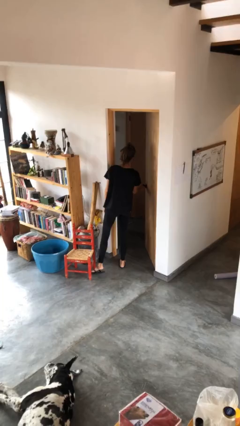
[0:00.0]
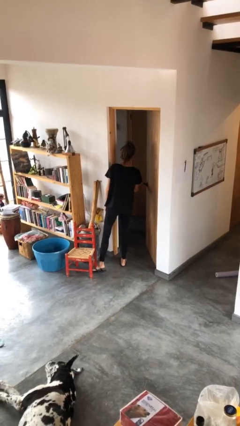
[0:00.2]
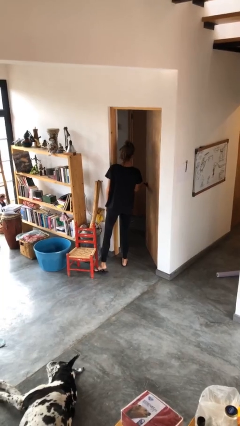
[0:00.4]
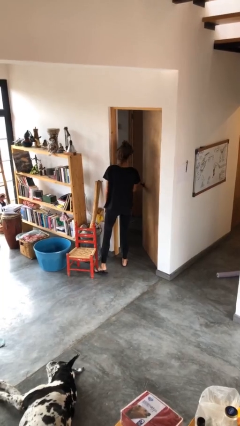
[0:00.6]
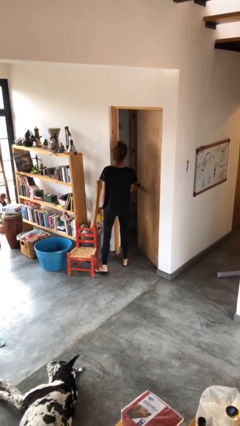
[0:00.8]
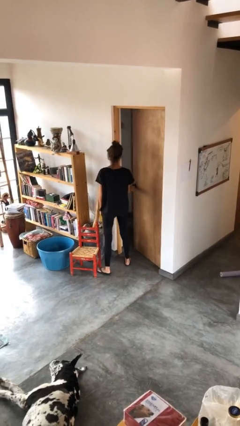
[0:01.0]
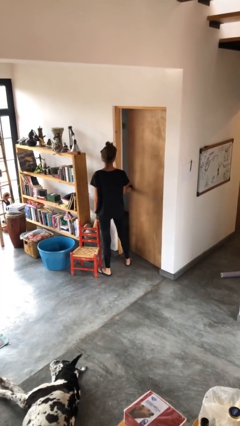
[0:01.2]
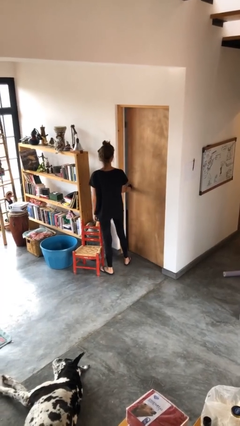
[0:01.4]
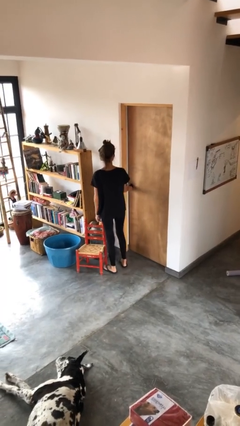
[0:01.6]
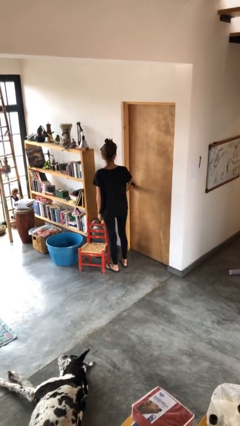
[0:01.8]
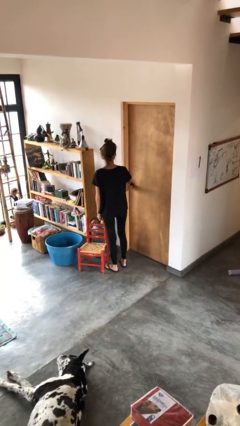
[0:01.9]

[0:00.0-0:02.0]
person closes facility door

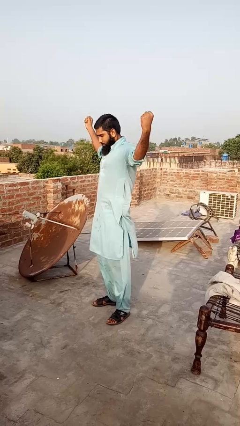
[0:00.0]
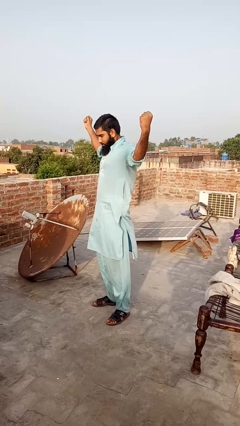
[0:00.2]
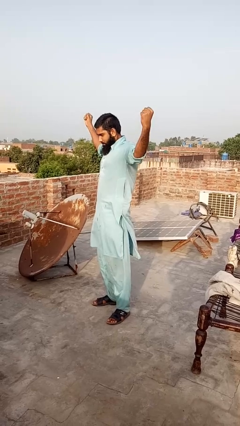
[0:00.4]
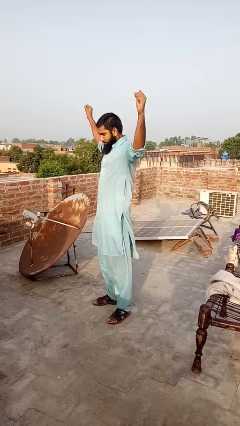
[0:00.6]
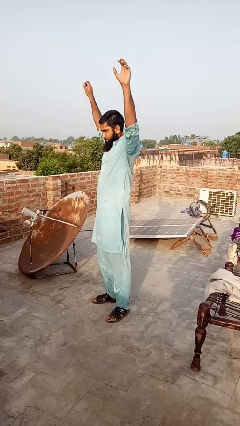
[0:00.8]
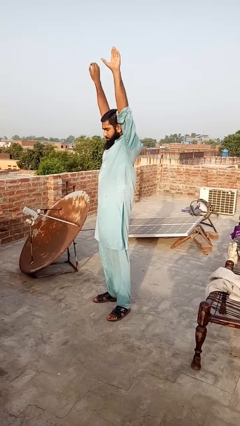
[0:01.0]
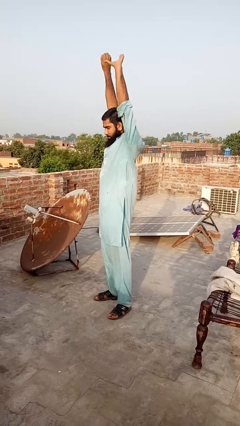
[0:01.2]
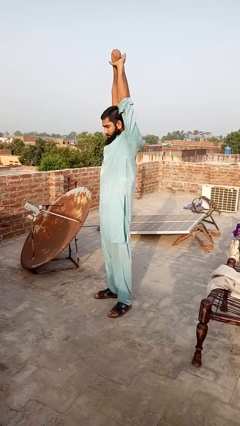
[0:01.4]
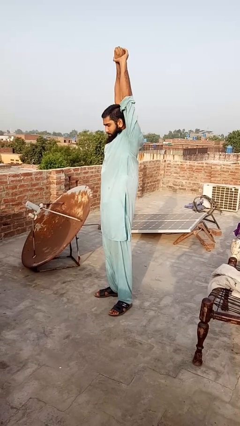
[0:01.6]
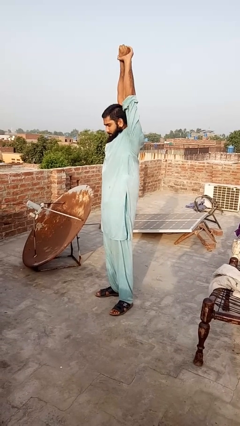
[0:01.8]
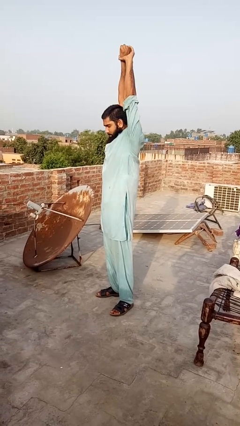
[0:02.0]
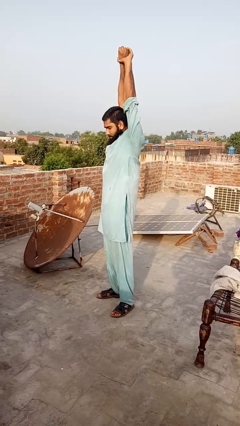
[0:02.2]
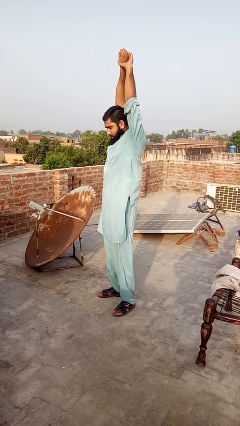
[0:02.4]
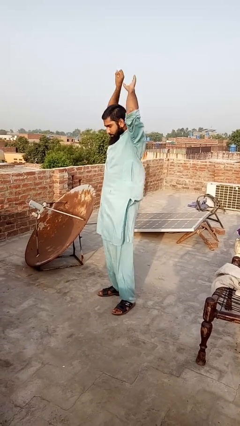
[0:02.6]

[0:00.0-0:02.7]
person stretches arms over head

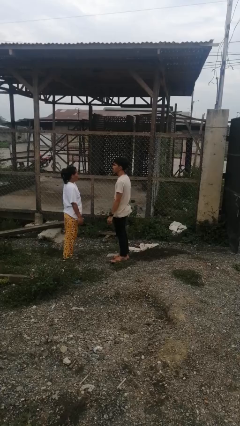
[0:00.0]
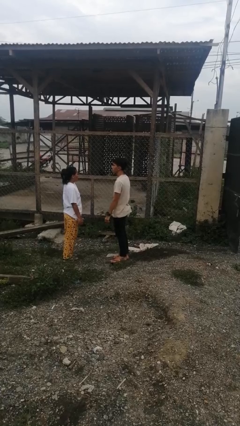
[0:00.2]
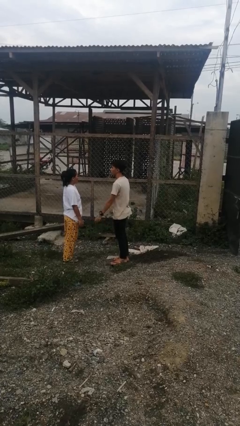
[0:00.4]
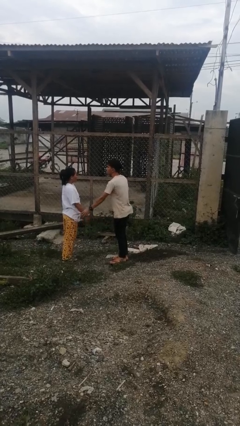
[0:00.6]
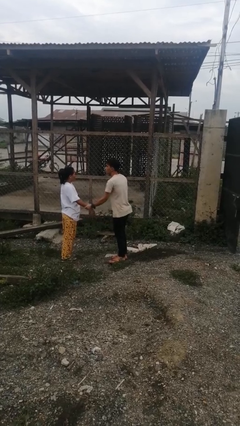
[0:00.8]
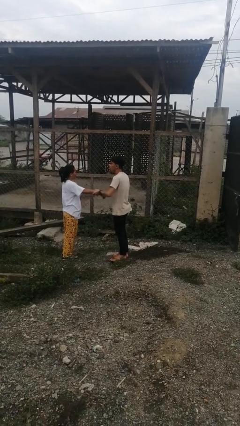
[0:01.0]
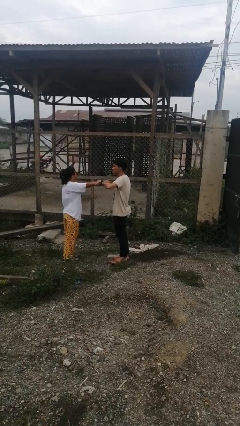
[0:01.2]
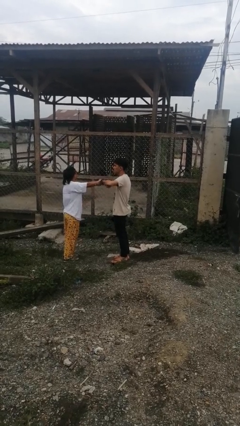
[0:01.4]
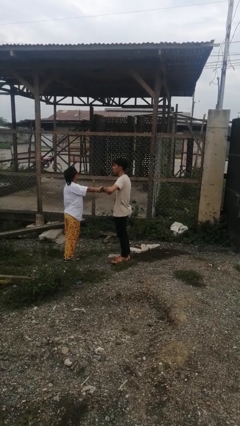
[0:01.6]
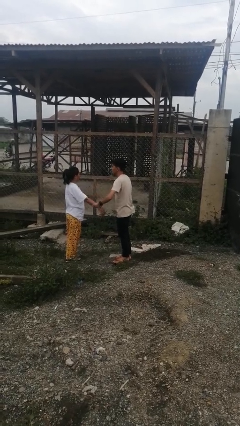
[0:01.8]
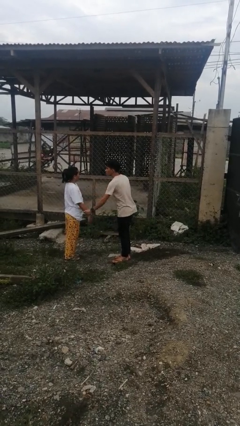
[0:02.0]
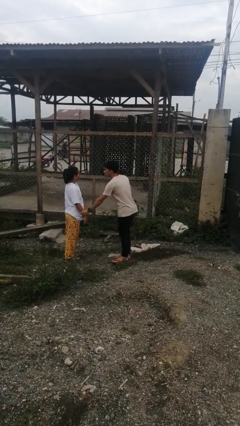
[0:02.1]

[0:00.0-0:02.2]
person grabs person by forearm

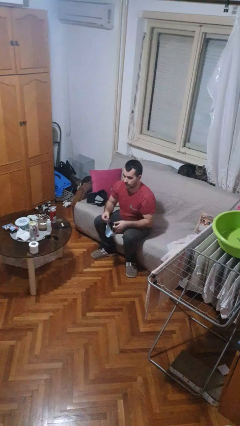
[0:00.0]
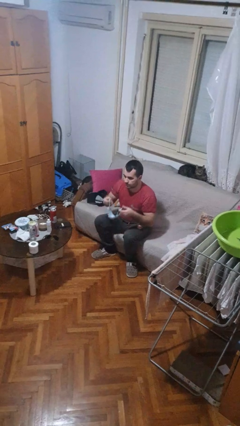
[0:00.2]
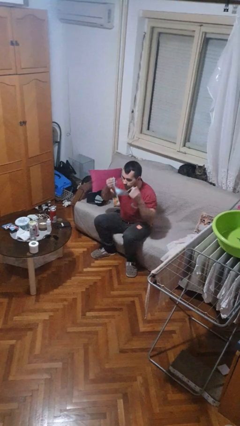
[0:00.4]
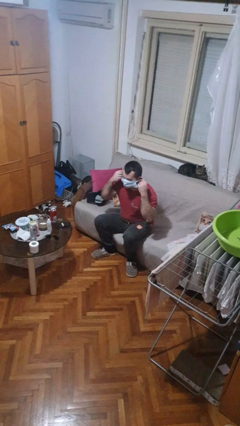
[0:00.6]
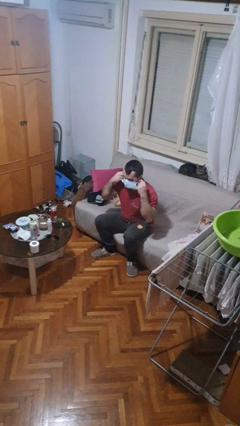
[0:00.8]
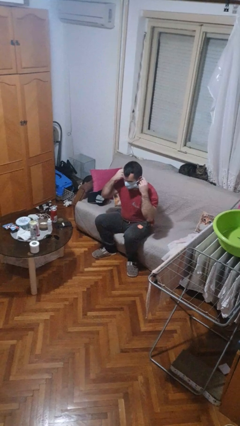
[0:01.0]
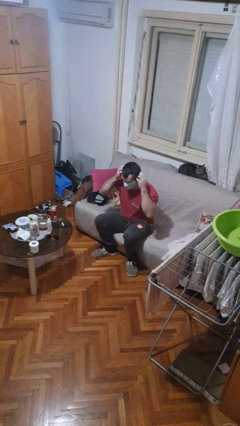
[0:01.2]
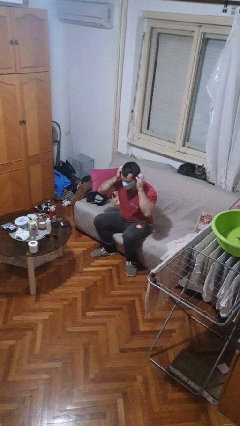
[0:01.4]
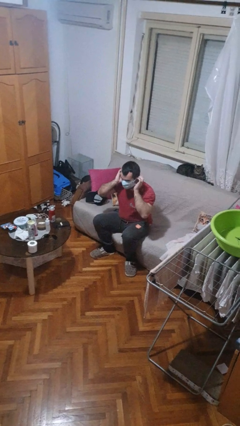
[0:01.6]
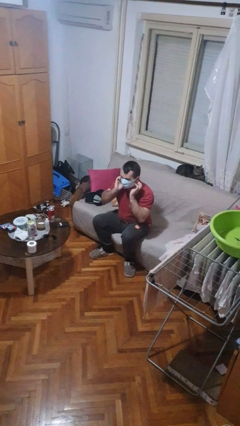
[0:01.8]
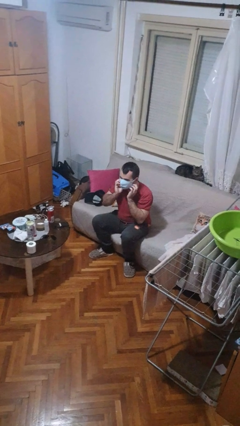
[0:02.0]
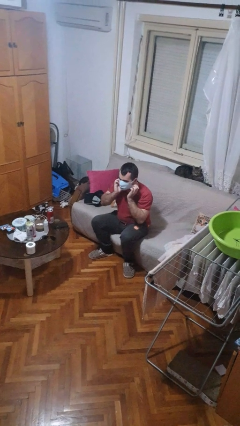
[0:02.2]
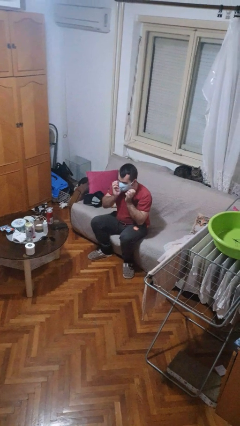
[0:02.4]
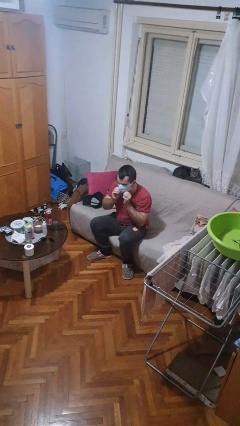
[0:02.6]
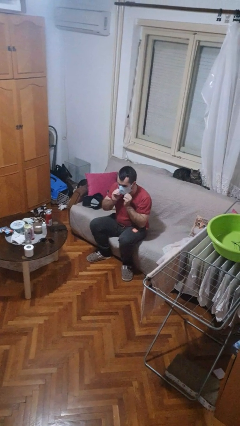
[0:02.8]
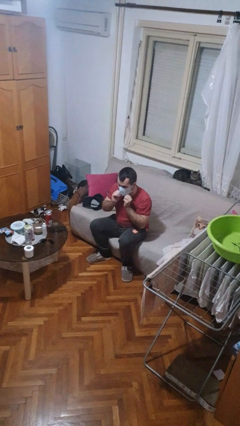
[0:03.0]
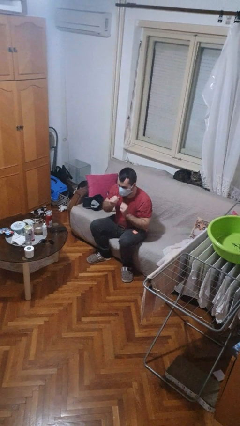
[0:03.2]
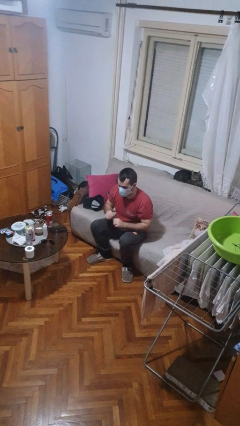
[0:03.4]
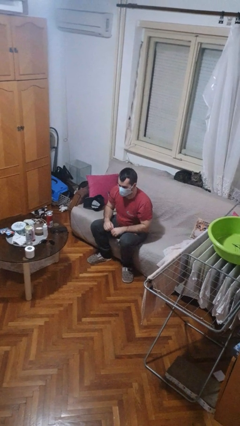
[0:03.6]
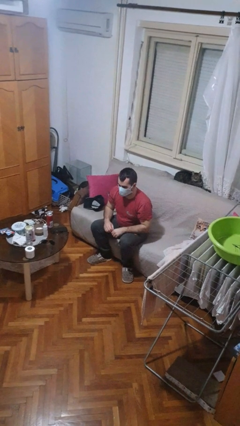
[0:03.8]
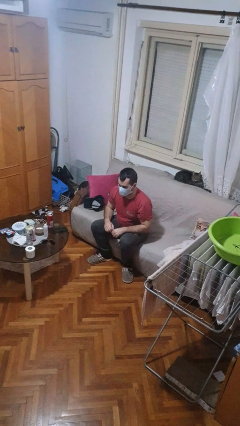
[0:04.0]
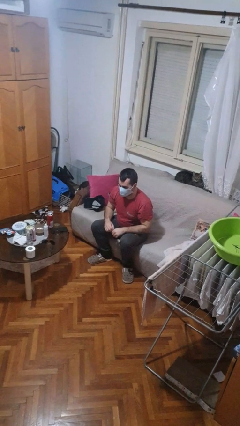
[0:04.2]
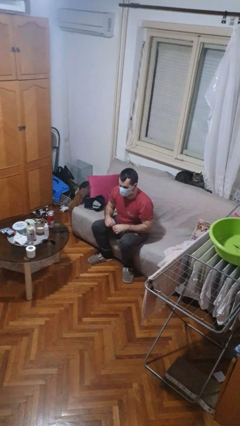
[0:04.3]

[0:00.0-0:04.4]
person puts on facemask

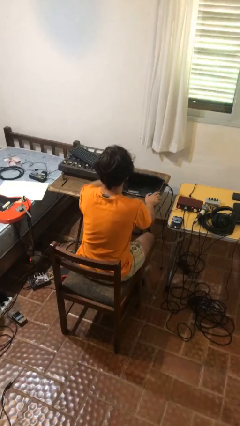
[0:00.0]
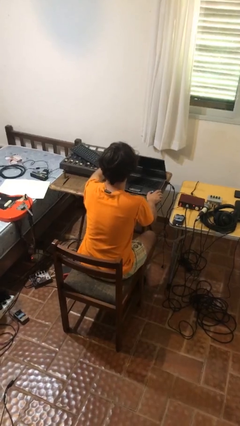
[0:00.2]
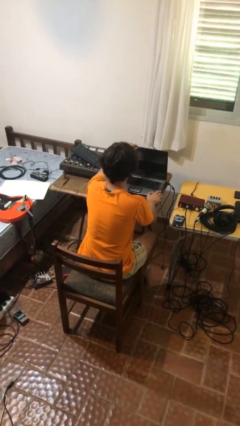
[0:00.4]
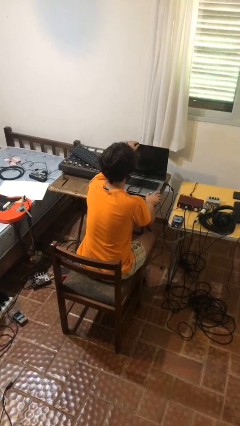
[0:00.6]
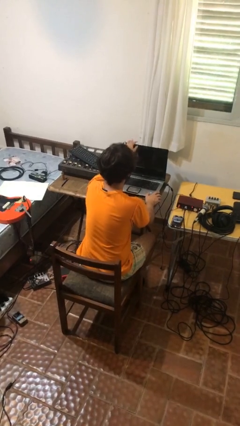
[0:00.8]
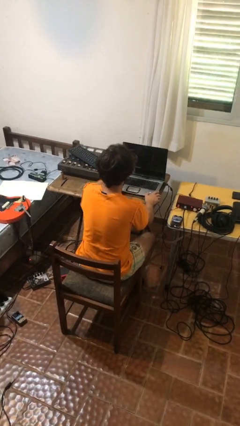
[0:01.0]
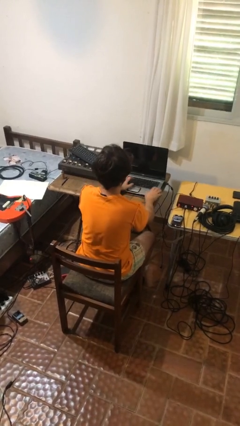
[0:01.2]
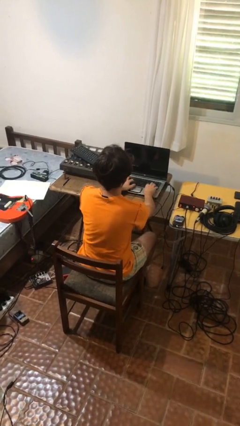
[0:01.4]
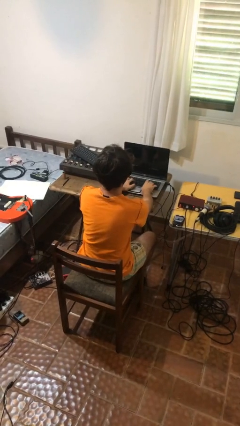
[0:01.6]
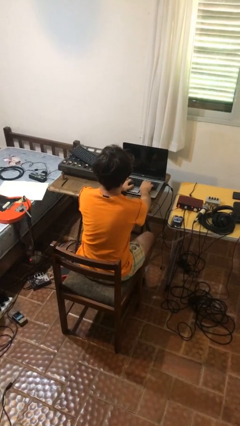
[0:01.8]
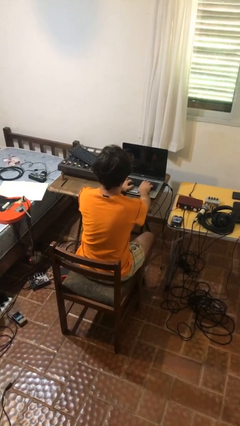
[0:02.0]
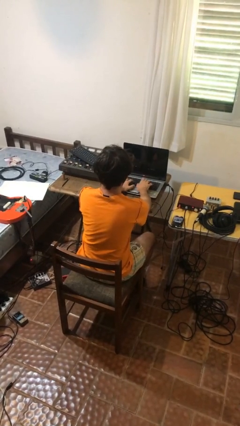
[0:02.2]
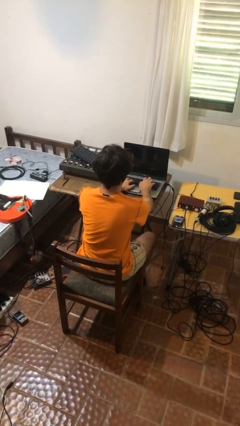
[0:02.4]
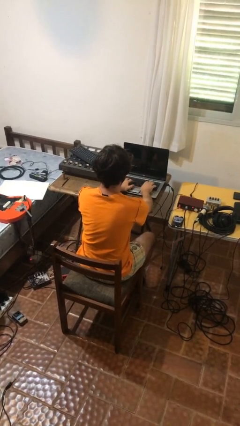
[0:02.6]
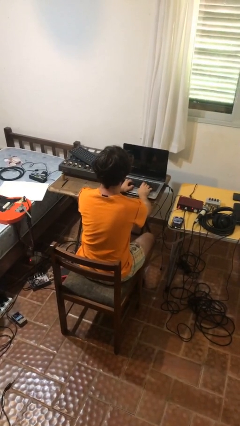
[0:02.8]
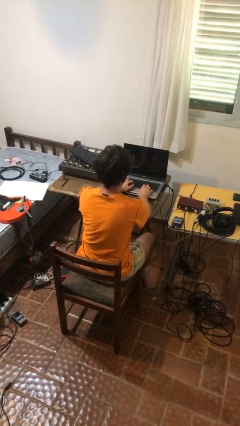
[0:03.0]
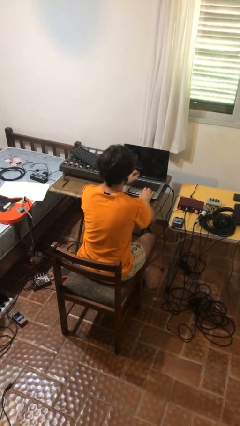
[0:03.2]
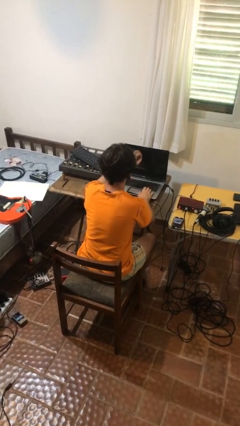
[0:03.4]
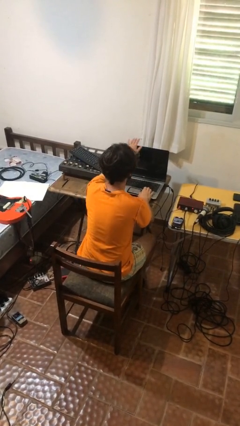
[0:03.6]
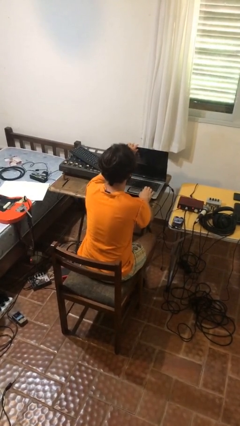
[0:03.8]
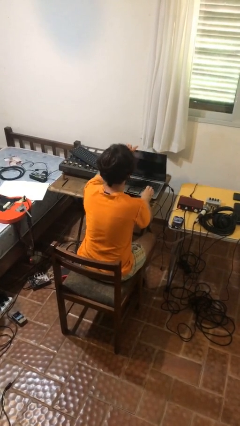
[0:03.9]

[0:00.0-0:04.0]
person interacts with laptop

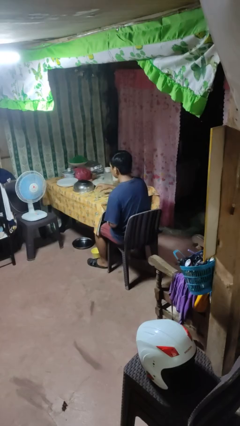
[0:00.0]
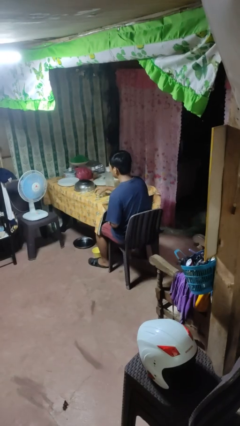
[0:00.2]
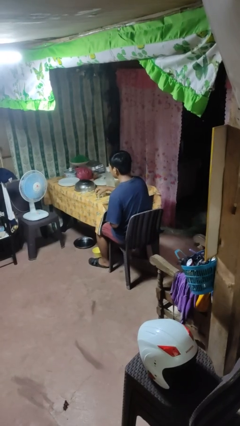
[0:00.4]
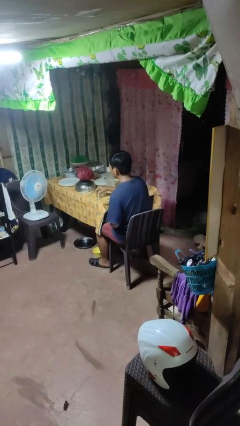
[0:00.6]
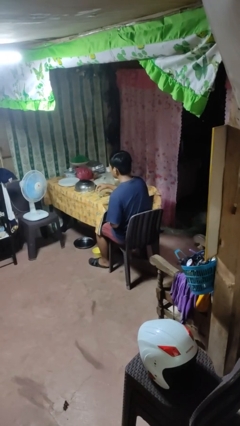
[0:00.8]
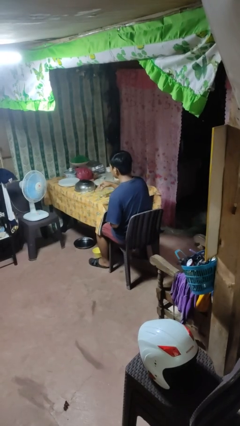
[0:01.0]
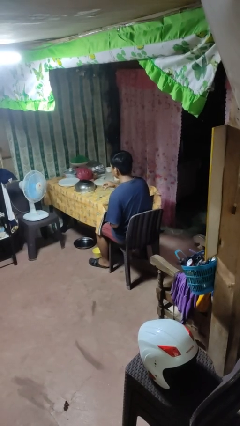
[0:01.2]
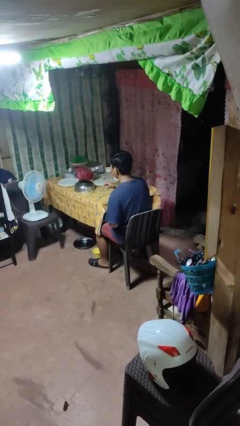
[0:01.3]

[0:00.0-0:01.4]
person picks up object from table

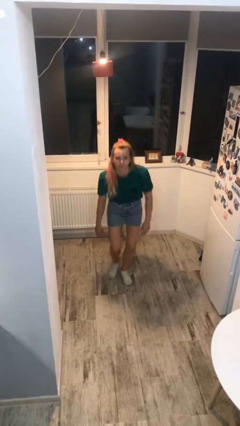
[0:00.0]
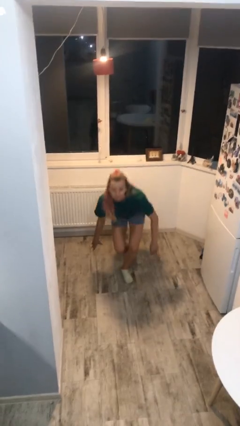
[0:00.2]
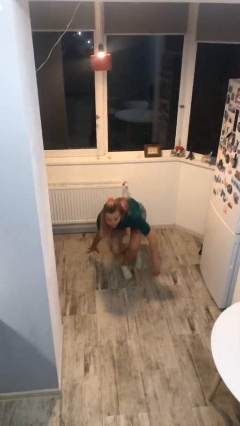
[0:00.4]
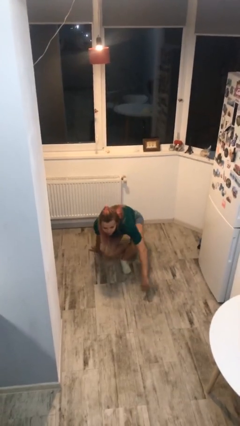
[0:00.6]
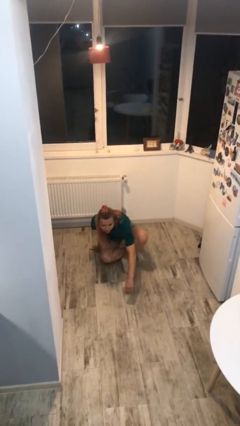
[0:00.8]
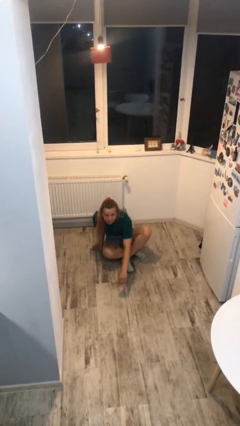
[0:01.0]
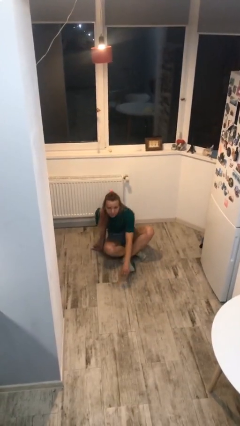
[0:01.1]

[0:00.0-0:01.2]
person sits crisscross
